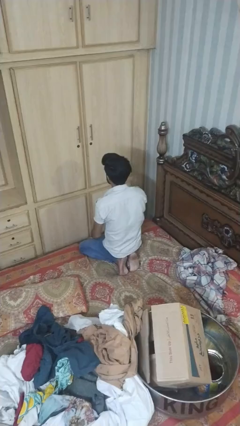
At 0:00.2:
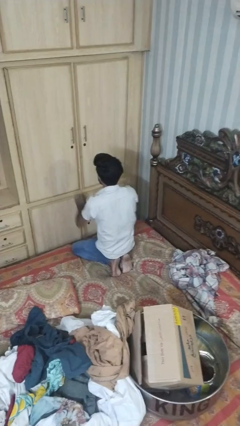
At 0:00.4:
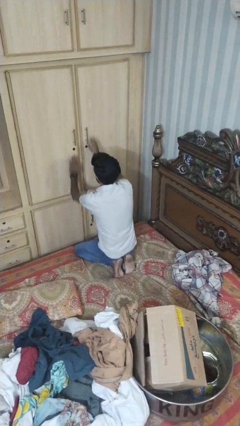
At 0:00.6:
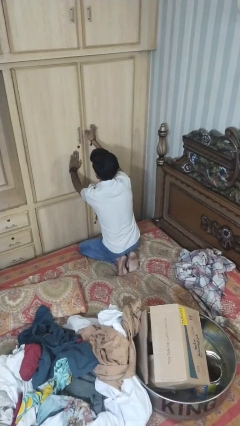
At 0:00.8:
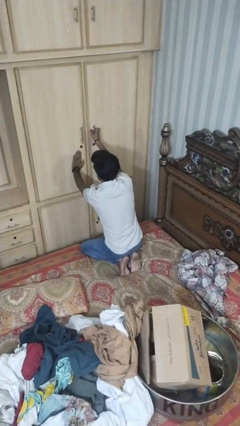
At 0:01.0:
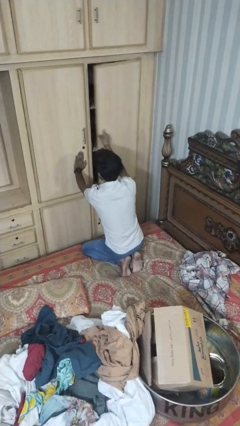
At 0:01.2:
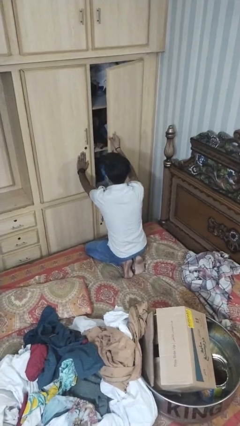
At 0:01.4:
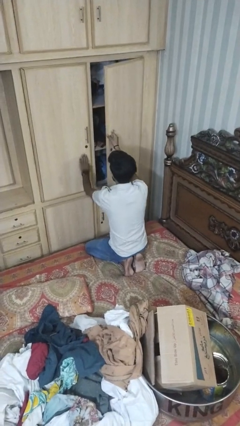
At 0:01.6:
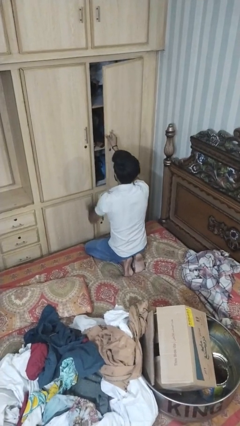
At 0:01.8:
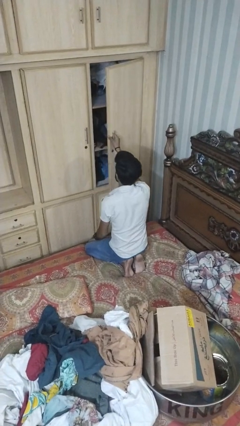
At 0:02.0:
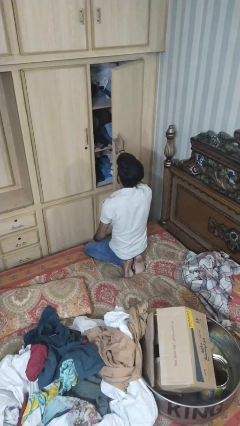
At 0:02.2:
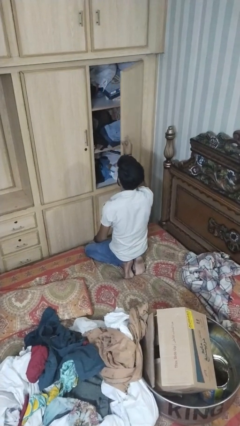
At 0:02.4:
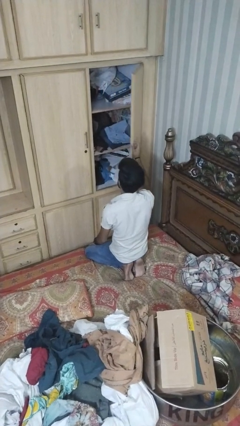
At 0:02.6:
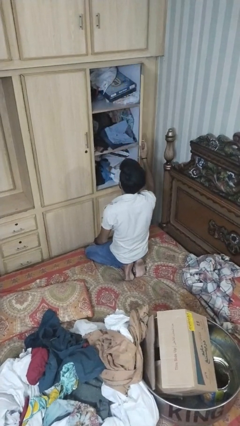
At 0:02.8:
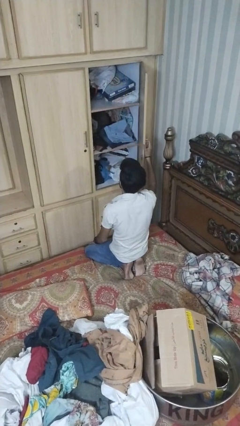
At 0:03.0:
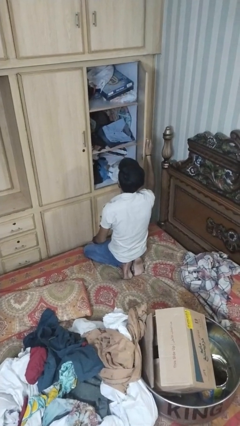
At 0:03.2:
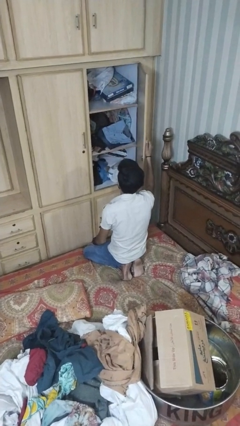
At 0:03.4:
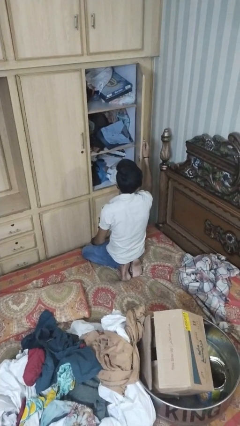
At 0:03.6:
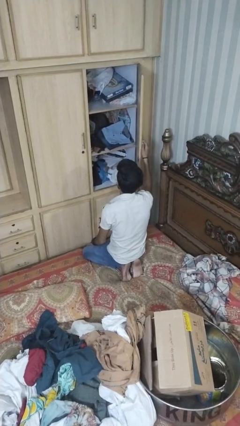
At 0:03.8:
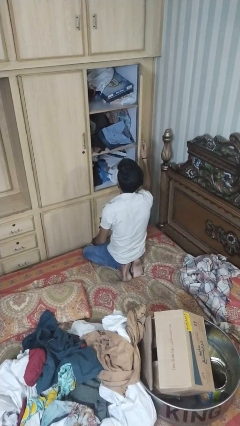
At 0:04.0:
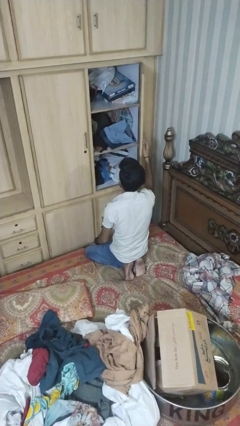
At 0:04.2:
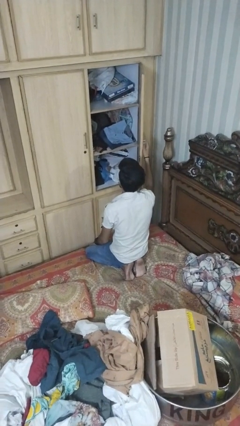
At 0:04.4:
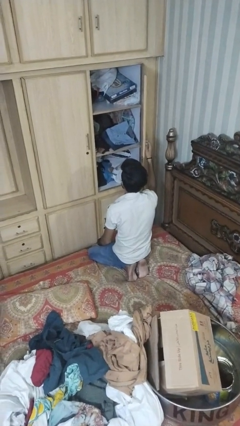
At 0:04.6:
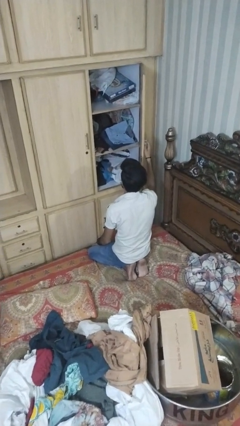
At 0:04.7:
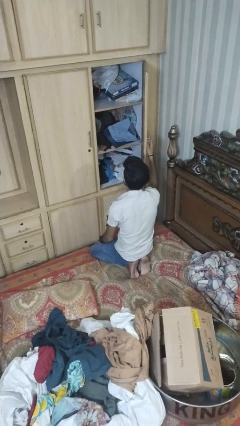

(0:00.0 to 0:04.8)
person opens dresser drawer

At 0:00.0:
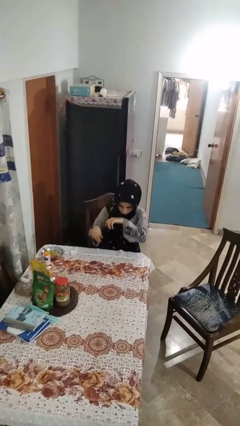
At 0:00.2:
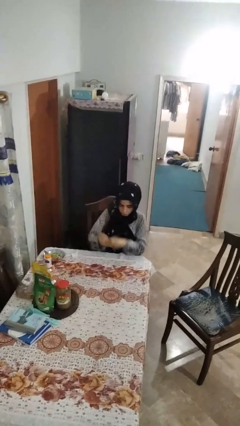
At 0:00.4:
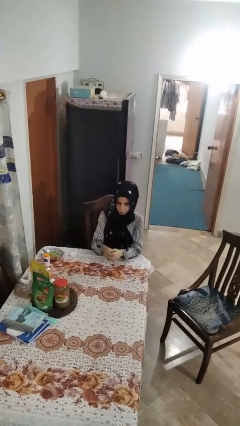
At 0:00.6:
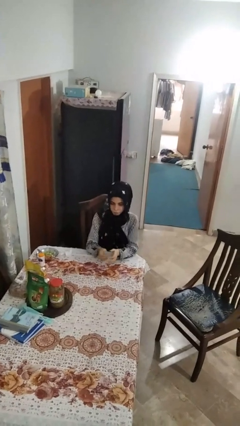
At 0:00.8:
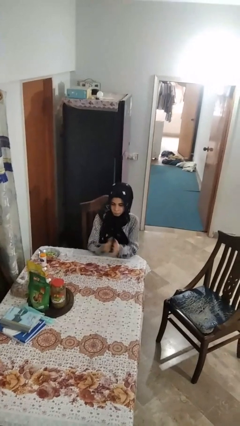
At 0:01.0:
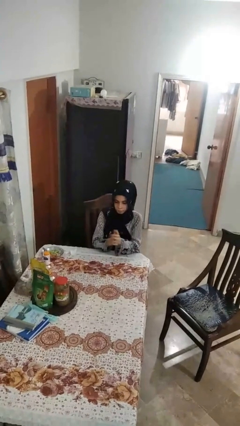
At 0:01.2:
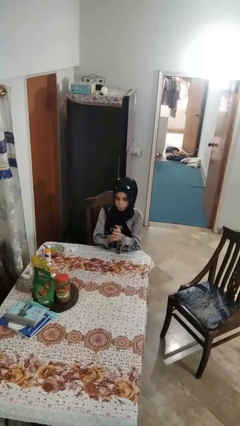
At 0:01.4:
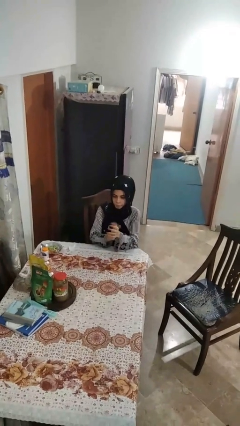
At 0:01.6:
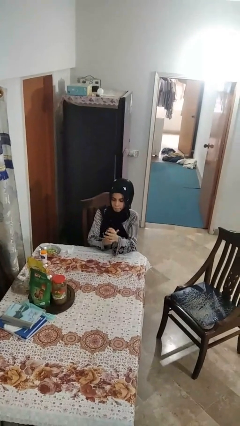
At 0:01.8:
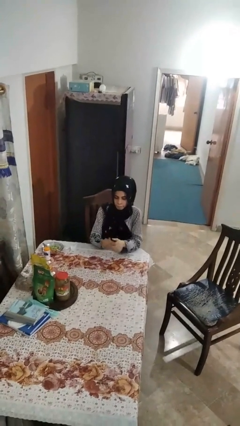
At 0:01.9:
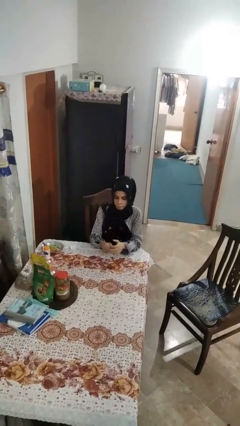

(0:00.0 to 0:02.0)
person claps hands

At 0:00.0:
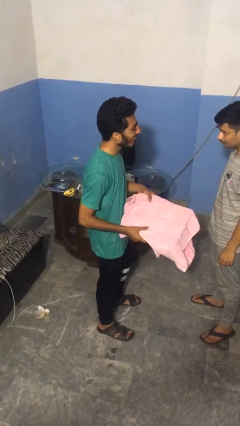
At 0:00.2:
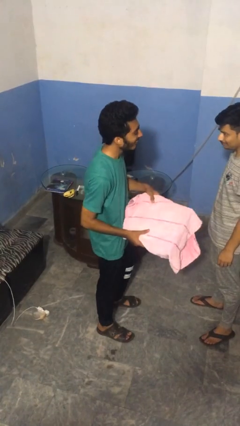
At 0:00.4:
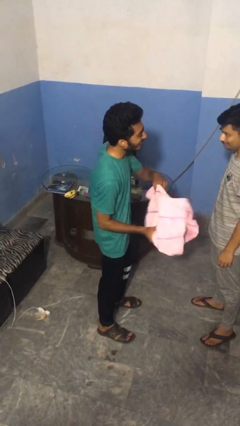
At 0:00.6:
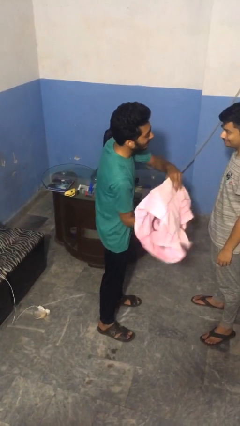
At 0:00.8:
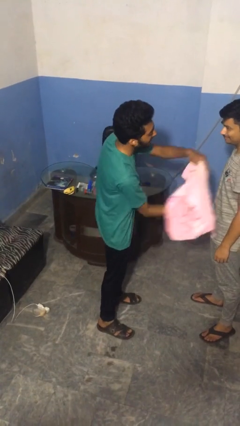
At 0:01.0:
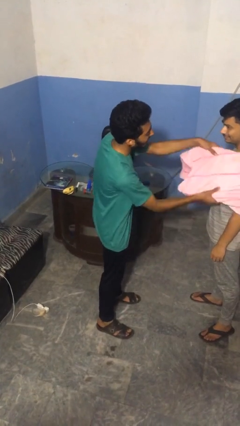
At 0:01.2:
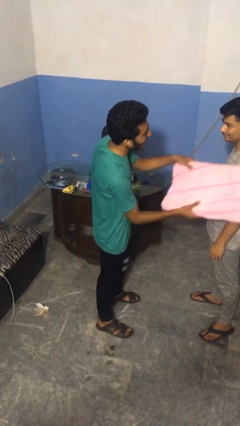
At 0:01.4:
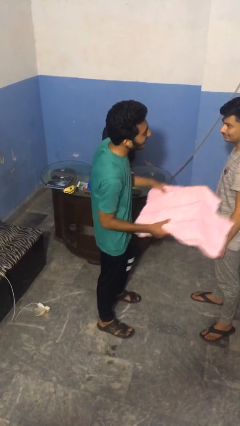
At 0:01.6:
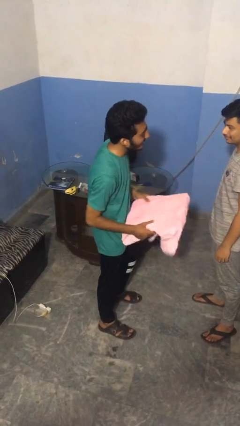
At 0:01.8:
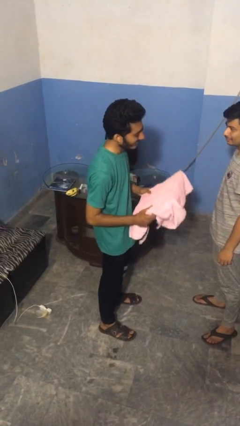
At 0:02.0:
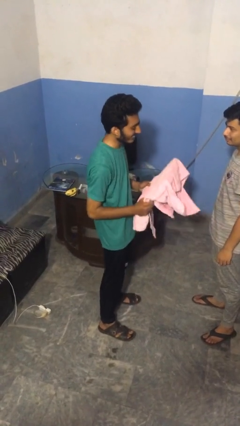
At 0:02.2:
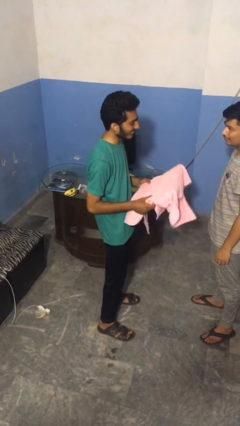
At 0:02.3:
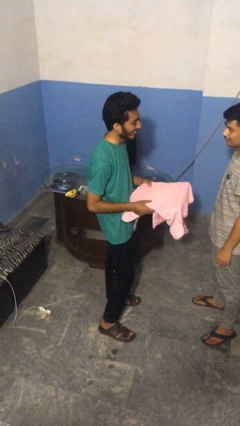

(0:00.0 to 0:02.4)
person hits person with pillow

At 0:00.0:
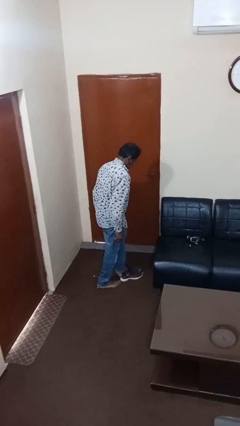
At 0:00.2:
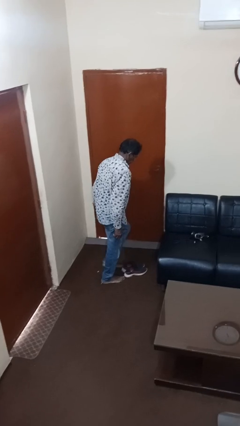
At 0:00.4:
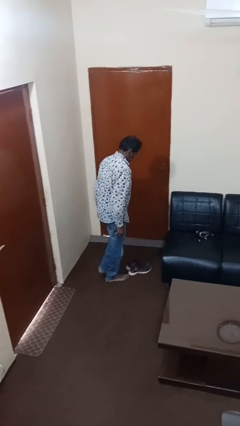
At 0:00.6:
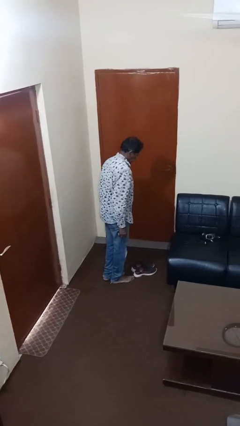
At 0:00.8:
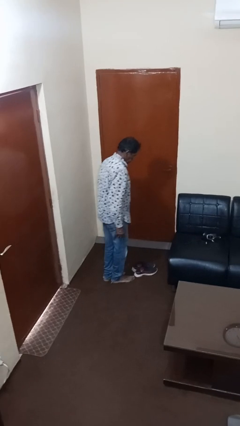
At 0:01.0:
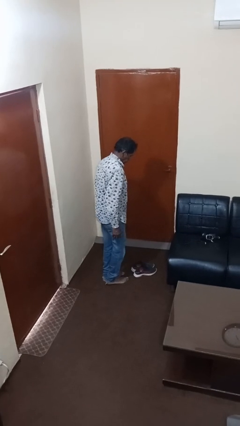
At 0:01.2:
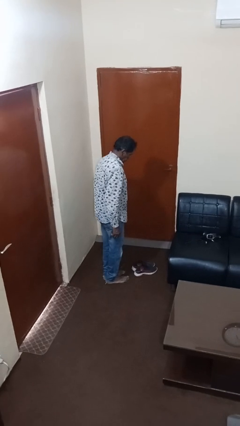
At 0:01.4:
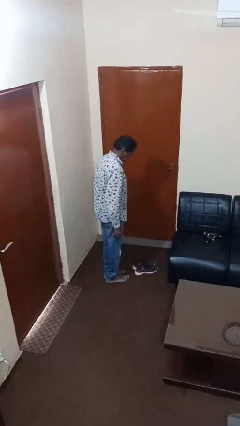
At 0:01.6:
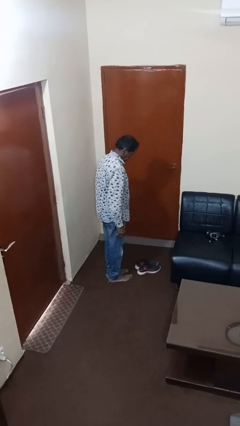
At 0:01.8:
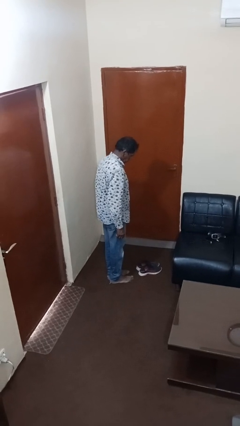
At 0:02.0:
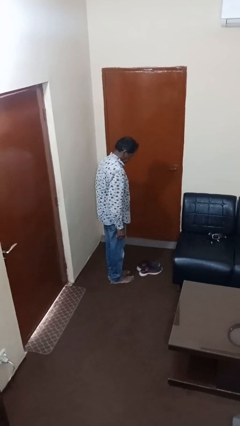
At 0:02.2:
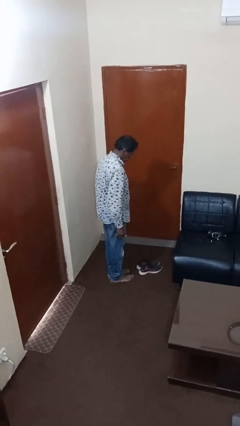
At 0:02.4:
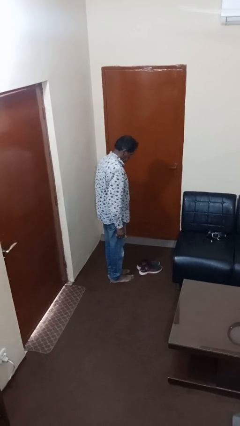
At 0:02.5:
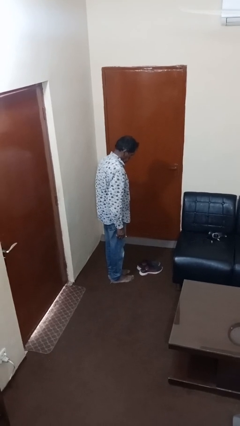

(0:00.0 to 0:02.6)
person takes off shoes

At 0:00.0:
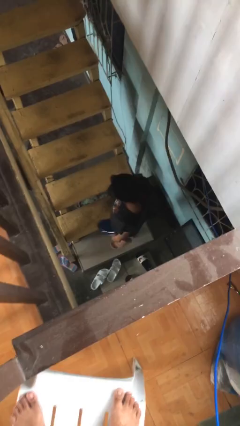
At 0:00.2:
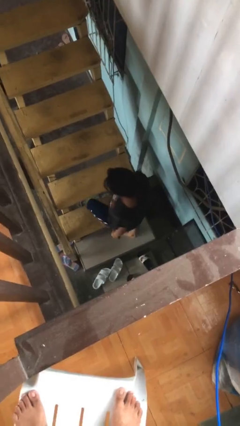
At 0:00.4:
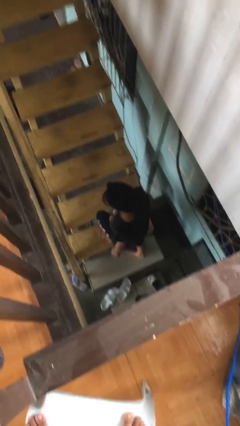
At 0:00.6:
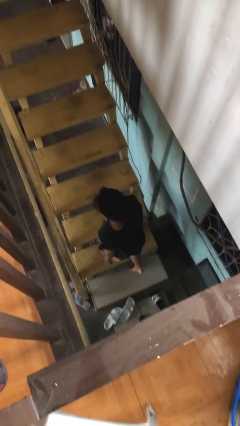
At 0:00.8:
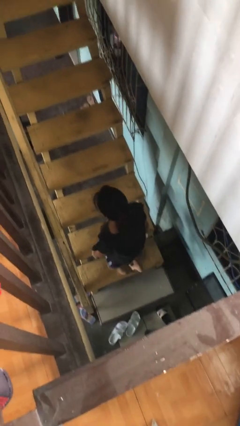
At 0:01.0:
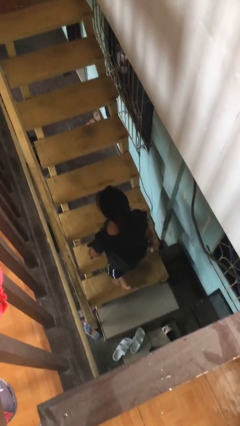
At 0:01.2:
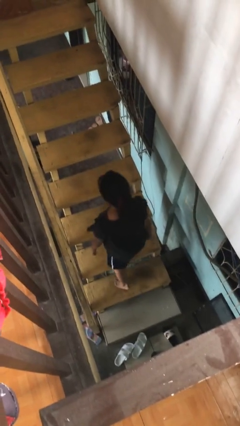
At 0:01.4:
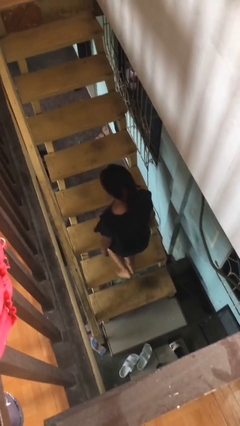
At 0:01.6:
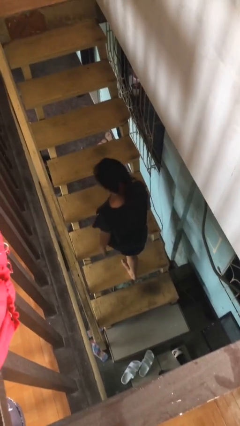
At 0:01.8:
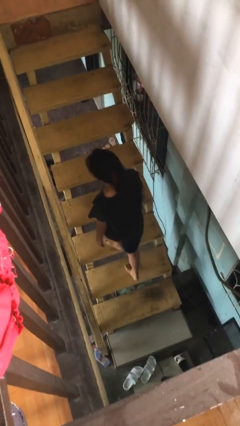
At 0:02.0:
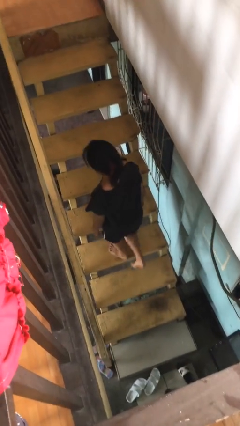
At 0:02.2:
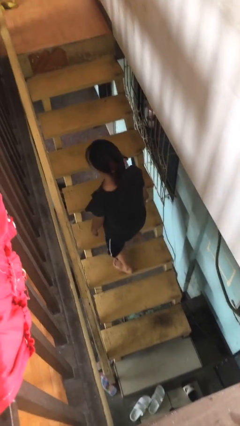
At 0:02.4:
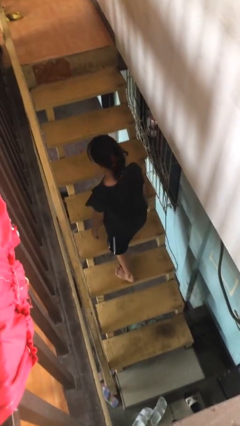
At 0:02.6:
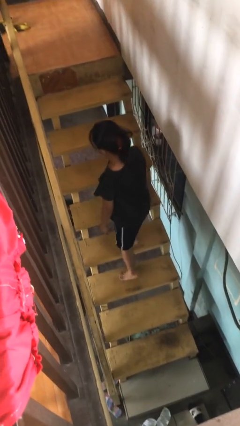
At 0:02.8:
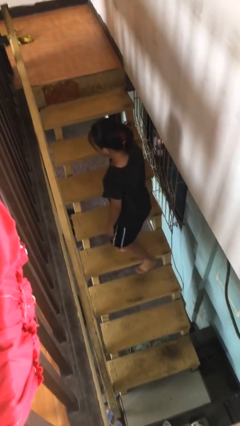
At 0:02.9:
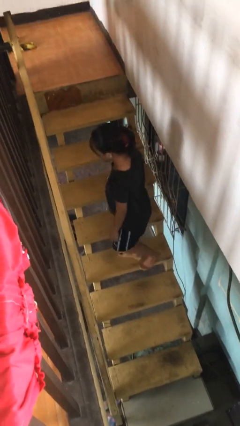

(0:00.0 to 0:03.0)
person climbs up stairs

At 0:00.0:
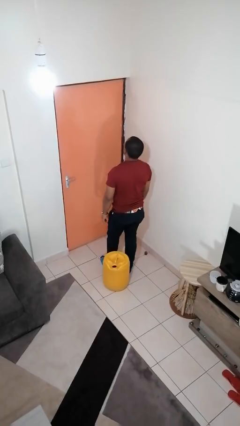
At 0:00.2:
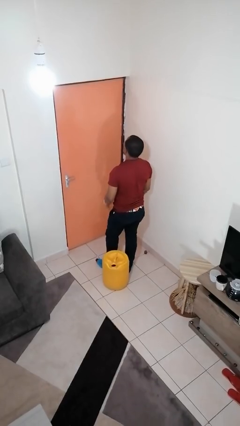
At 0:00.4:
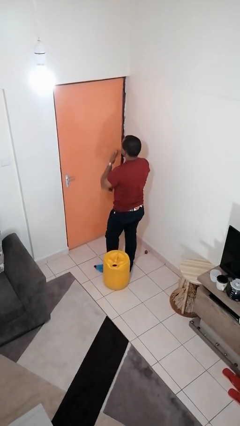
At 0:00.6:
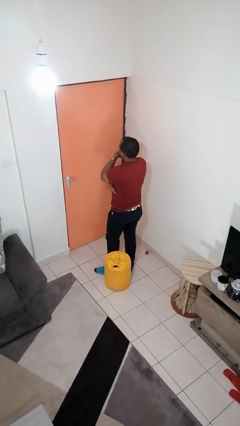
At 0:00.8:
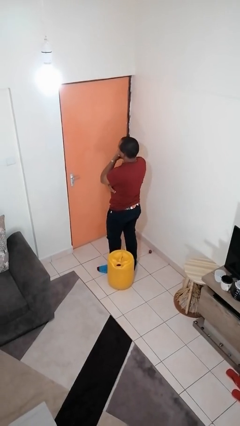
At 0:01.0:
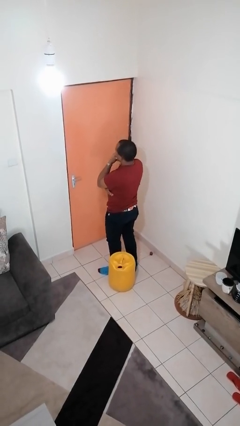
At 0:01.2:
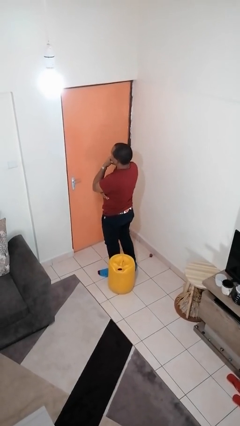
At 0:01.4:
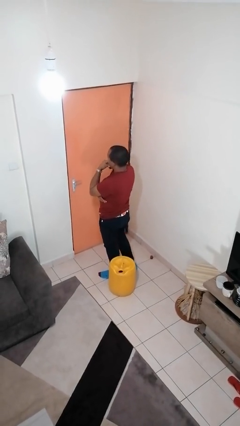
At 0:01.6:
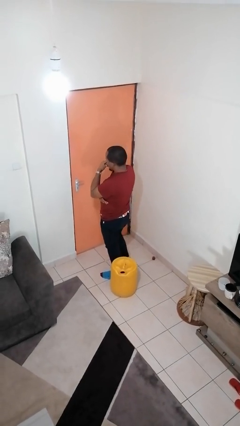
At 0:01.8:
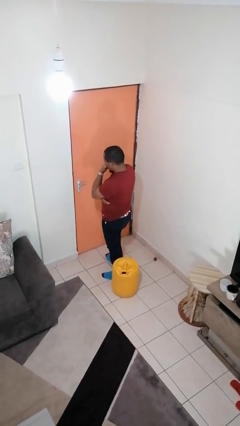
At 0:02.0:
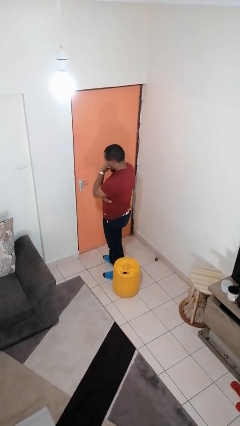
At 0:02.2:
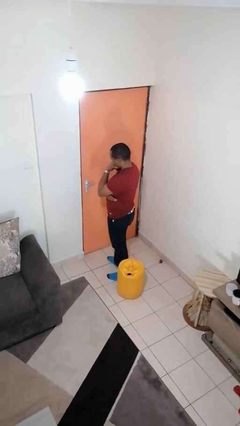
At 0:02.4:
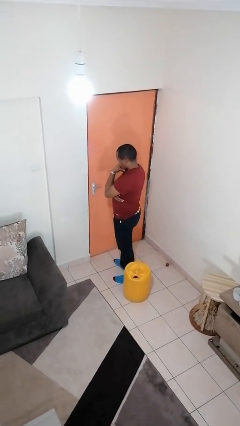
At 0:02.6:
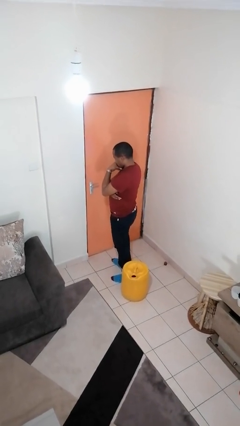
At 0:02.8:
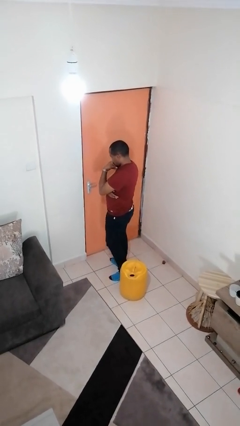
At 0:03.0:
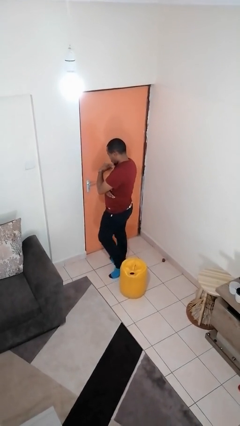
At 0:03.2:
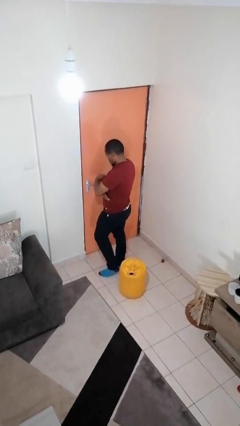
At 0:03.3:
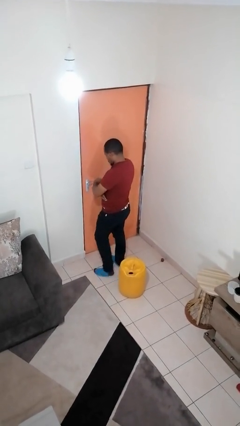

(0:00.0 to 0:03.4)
person strokes chin
